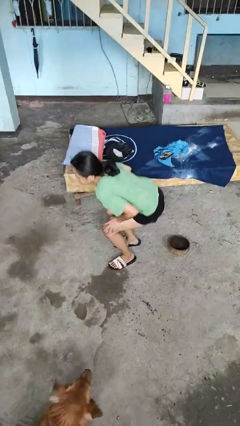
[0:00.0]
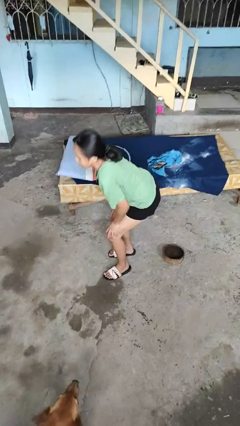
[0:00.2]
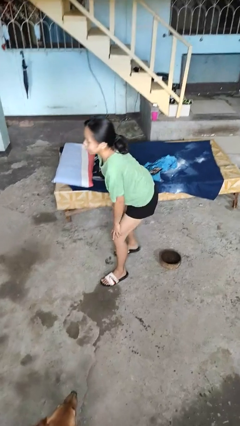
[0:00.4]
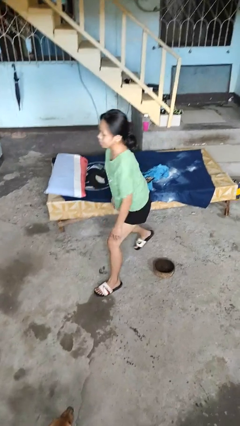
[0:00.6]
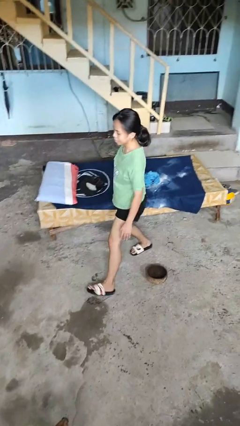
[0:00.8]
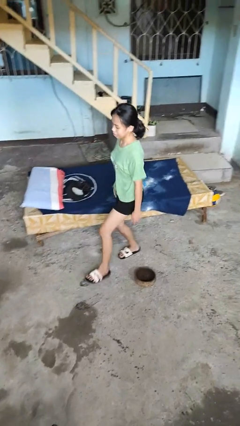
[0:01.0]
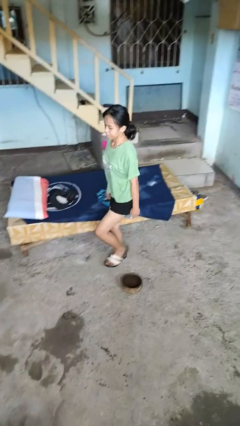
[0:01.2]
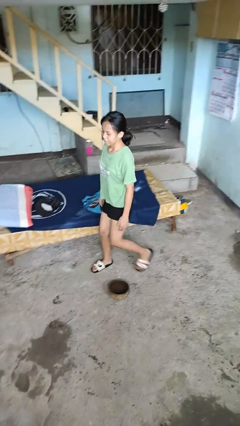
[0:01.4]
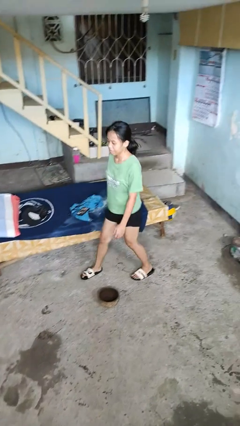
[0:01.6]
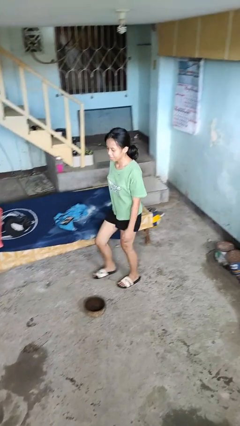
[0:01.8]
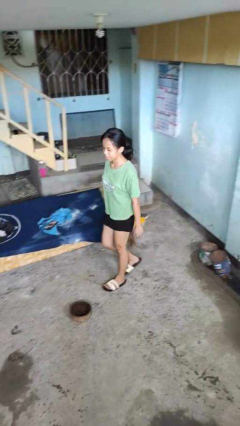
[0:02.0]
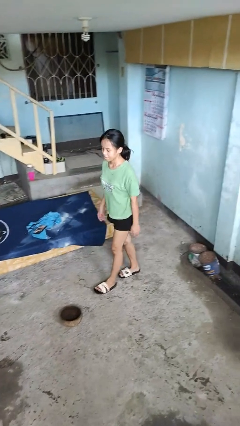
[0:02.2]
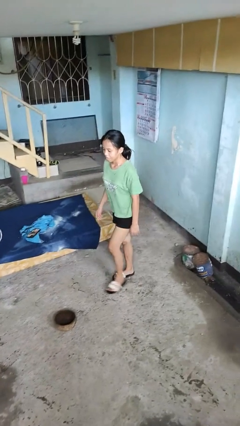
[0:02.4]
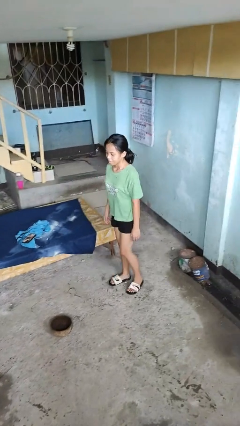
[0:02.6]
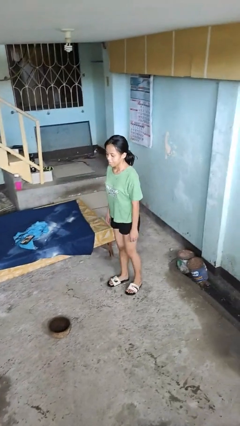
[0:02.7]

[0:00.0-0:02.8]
person stands up from floor

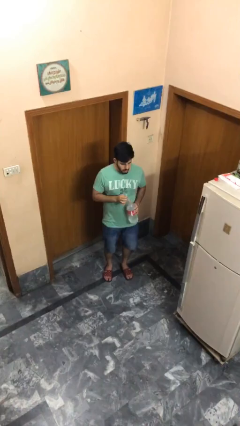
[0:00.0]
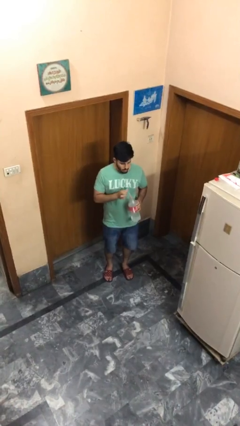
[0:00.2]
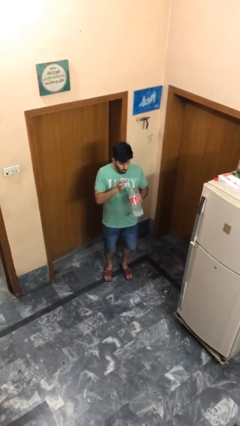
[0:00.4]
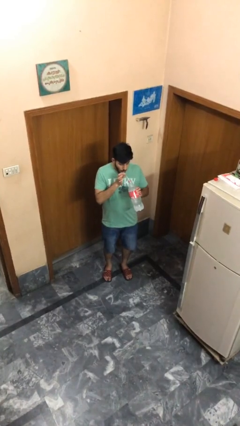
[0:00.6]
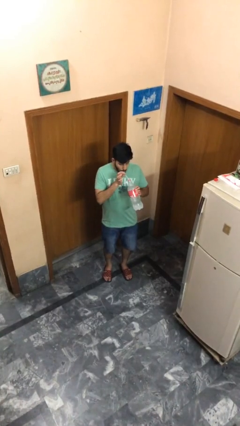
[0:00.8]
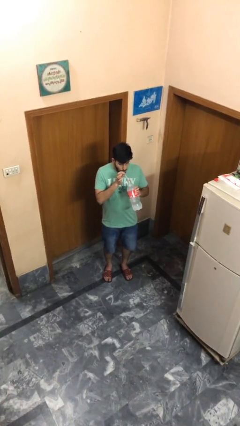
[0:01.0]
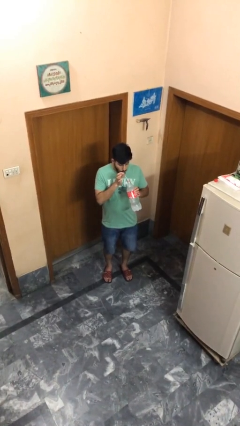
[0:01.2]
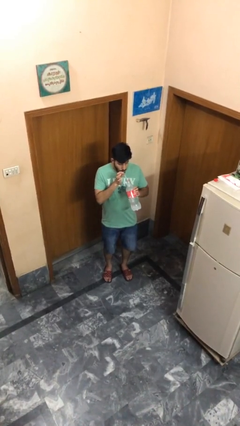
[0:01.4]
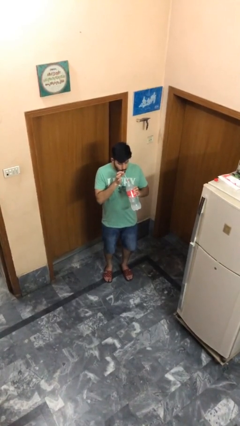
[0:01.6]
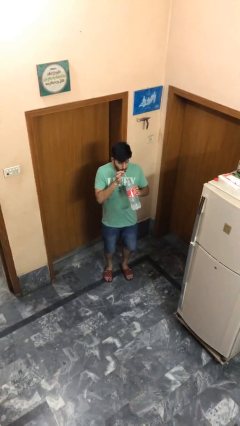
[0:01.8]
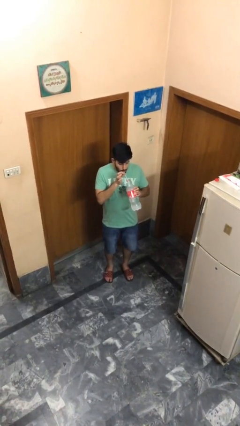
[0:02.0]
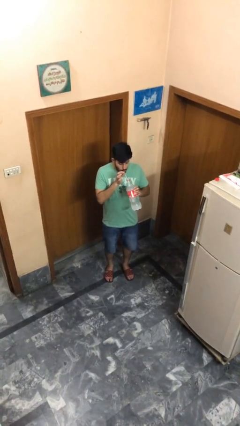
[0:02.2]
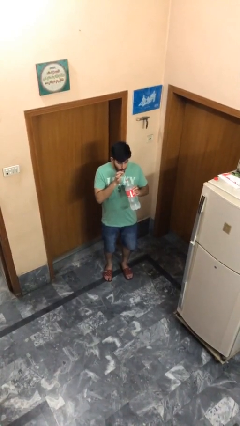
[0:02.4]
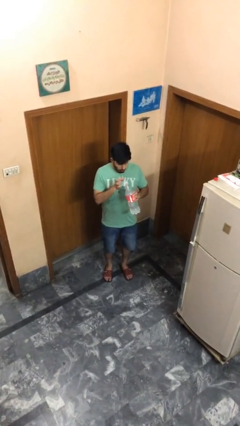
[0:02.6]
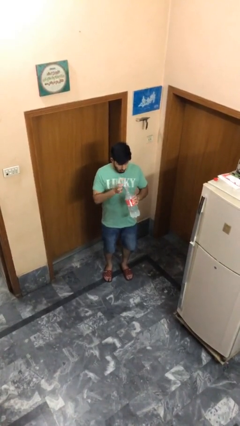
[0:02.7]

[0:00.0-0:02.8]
person drinks from straw

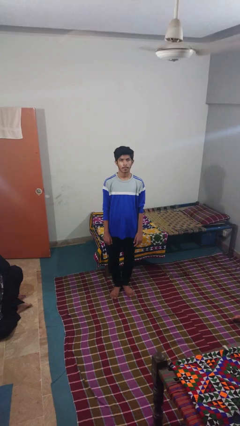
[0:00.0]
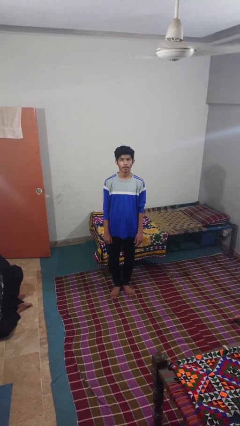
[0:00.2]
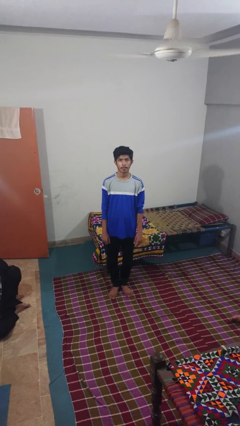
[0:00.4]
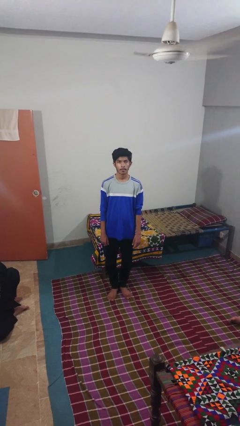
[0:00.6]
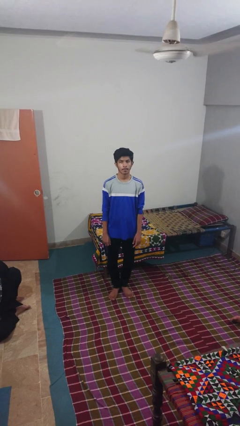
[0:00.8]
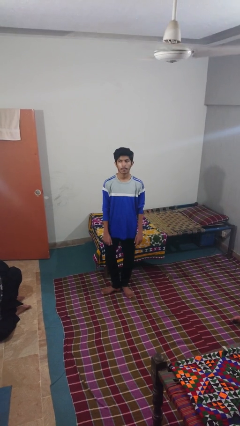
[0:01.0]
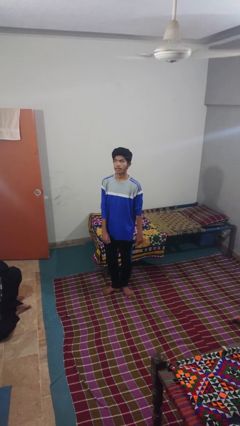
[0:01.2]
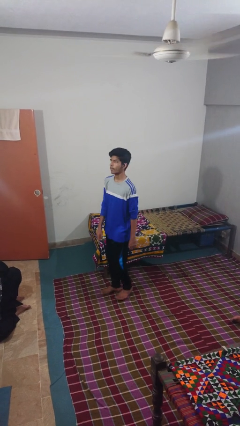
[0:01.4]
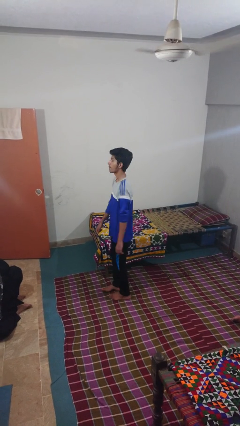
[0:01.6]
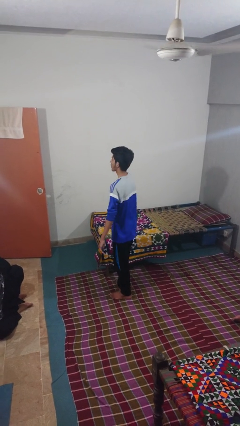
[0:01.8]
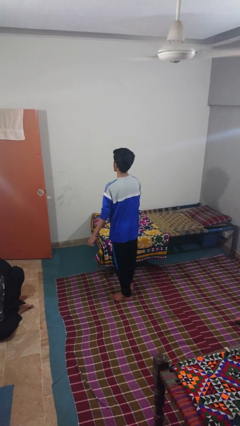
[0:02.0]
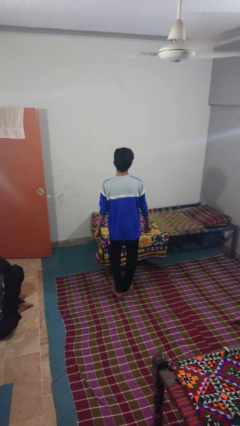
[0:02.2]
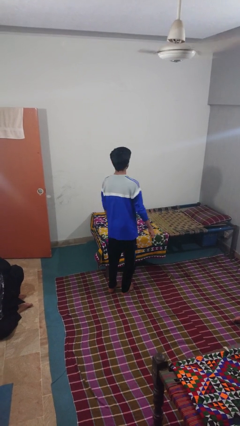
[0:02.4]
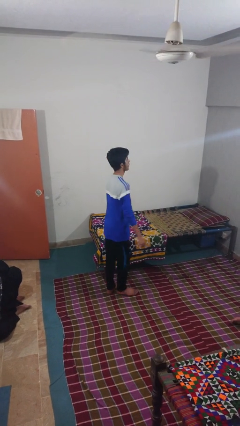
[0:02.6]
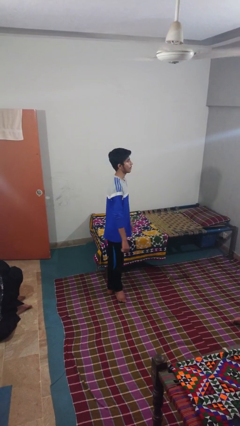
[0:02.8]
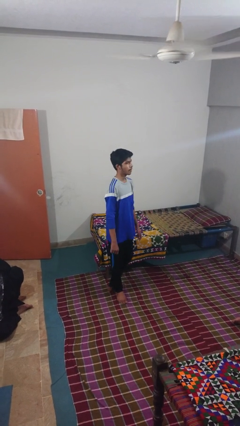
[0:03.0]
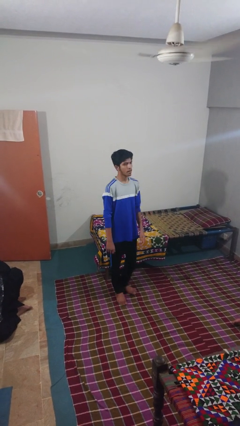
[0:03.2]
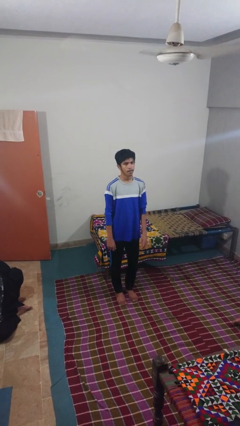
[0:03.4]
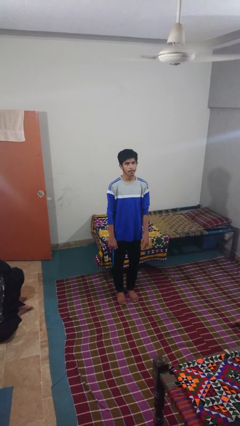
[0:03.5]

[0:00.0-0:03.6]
person twirls

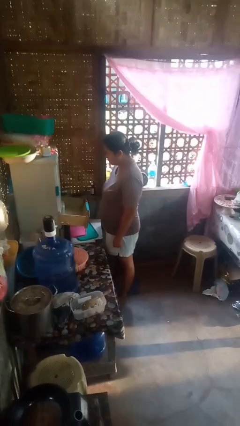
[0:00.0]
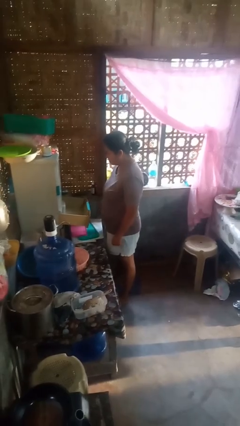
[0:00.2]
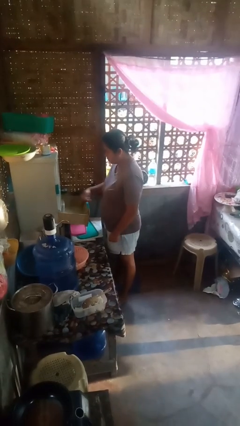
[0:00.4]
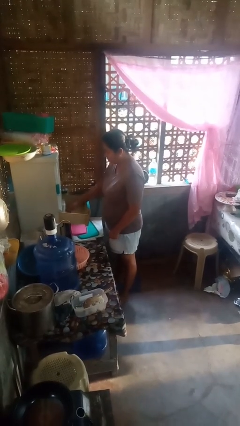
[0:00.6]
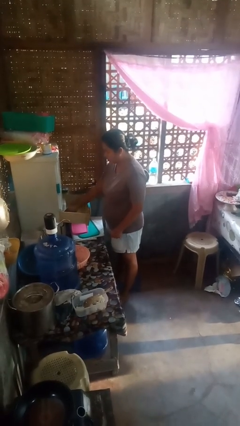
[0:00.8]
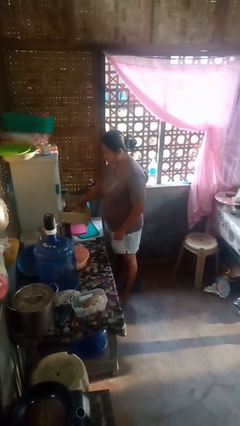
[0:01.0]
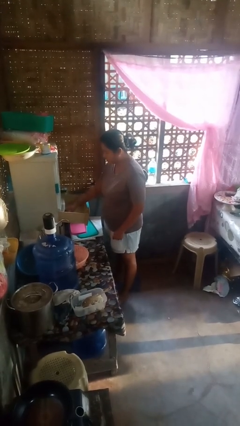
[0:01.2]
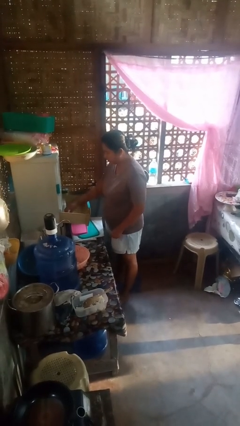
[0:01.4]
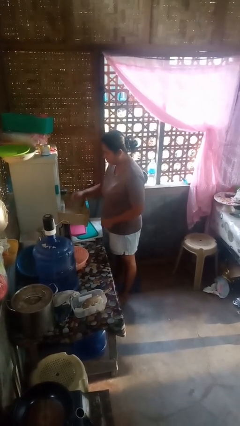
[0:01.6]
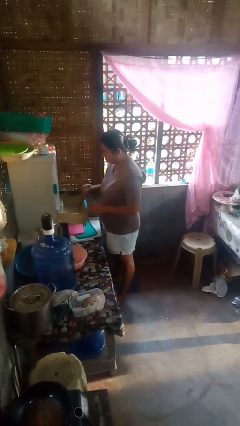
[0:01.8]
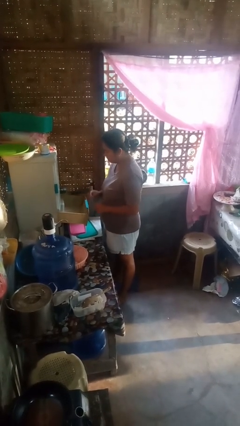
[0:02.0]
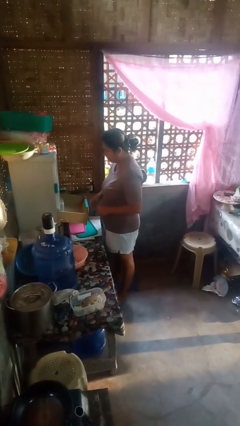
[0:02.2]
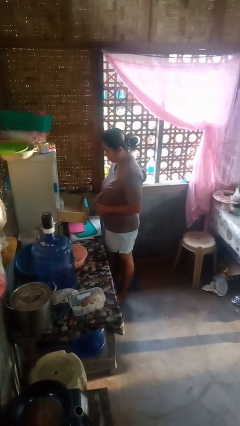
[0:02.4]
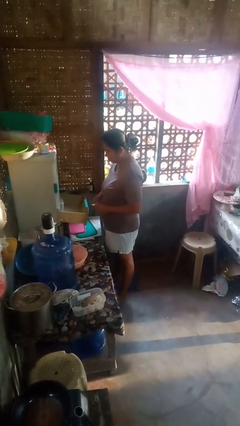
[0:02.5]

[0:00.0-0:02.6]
person takes object from kitchen drawer

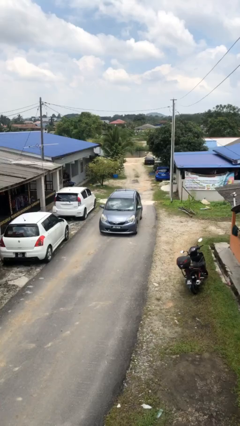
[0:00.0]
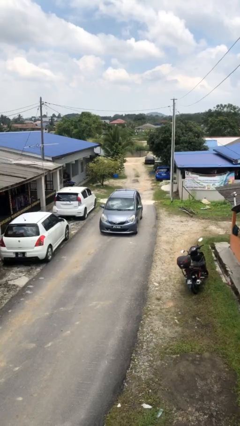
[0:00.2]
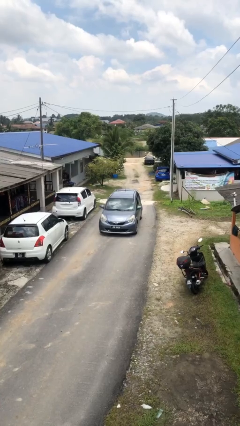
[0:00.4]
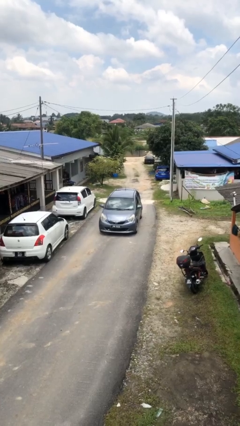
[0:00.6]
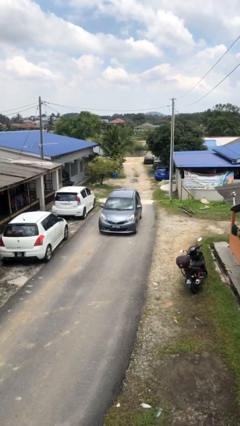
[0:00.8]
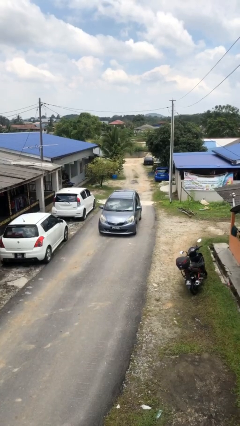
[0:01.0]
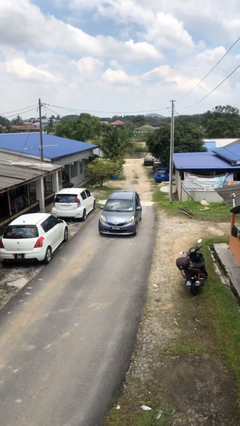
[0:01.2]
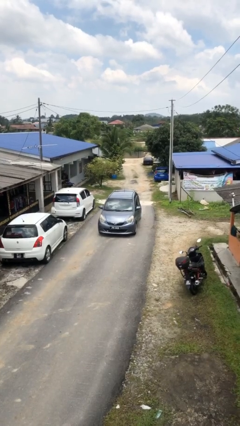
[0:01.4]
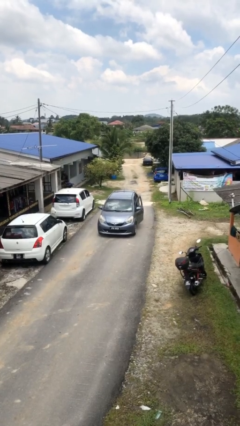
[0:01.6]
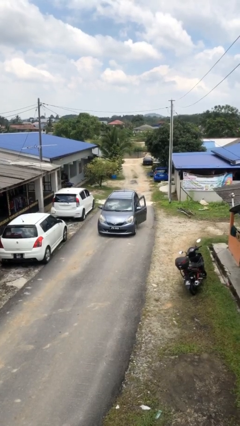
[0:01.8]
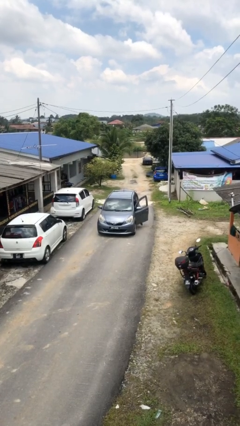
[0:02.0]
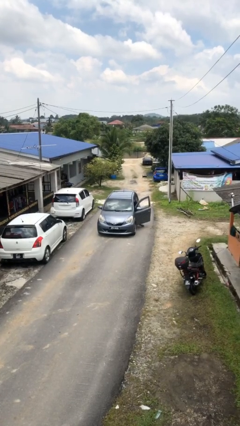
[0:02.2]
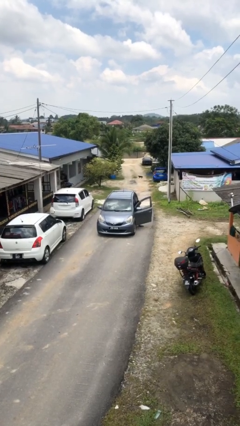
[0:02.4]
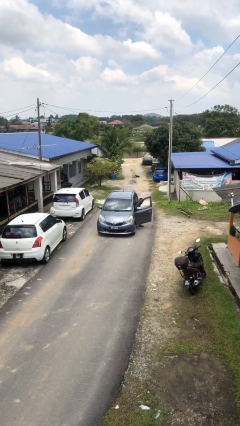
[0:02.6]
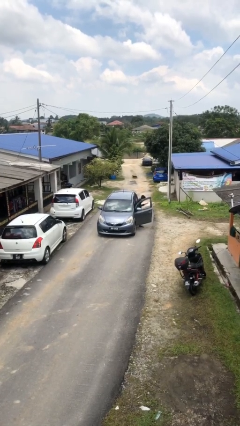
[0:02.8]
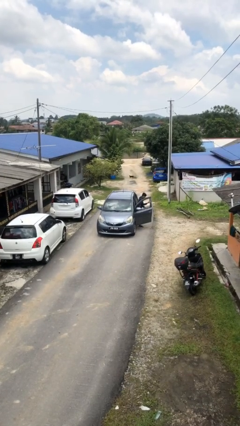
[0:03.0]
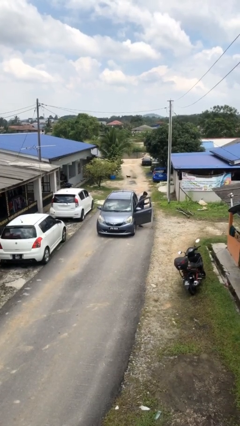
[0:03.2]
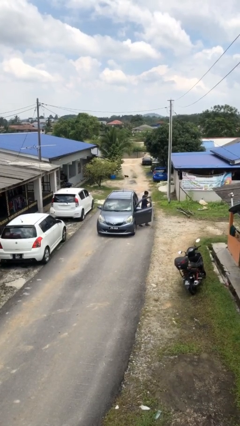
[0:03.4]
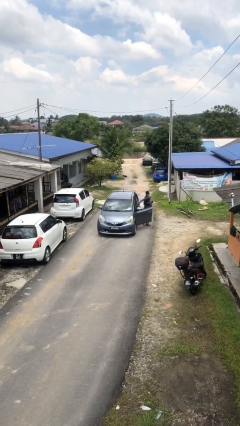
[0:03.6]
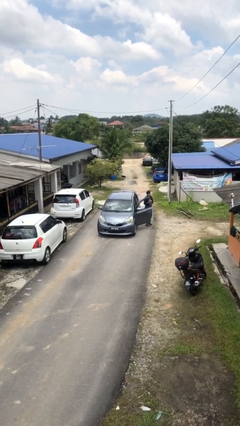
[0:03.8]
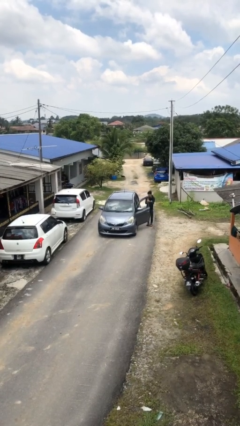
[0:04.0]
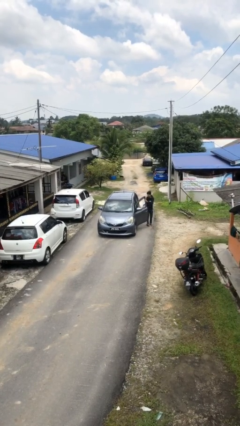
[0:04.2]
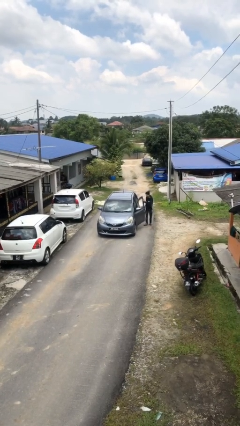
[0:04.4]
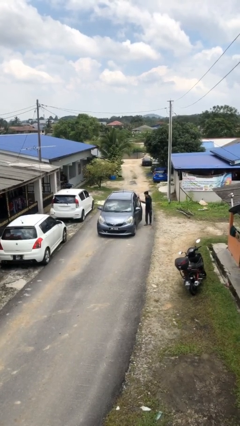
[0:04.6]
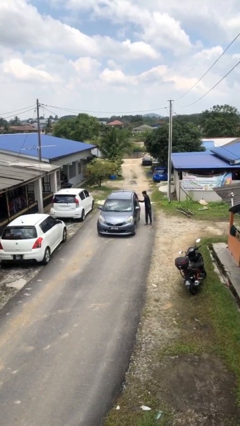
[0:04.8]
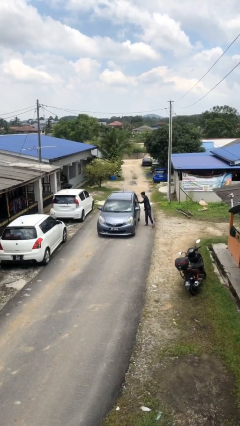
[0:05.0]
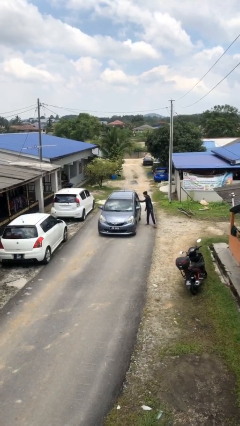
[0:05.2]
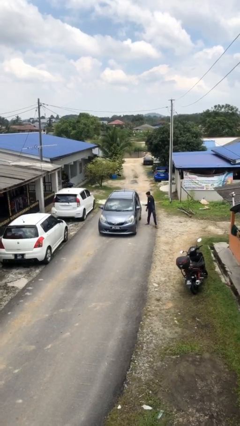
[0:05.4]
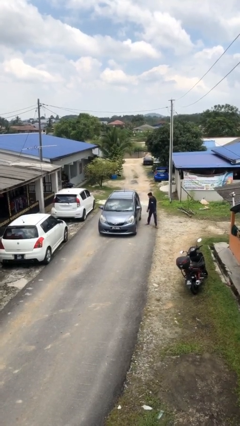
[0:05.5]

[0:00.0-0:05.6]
car drops off person

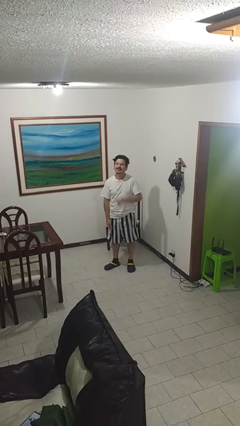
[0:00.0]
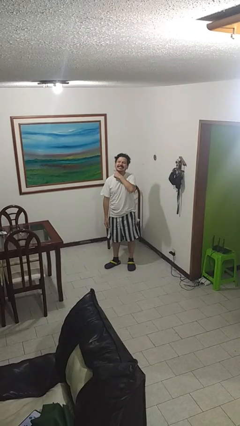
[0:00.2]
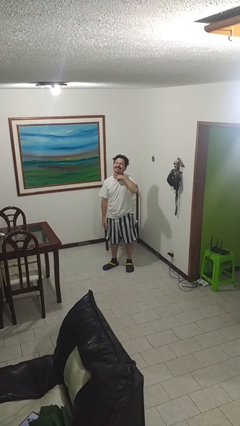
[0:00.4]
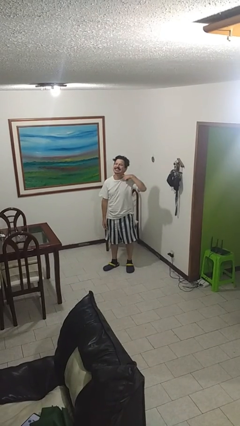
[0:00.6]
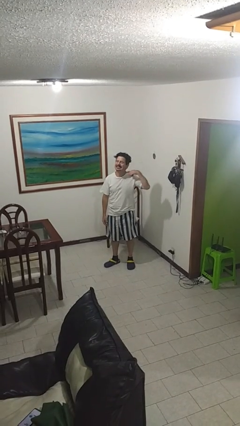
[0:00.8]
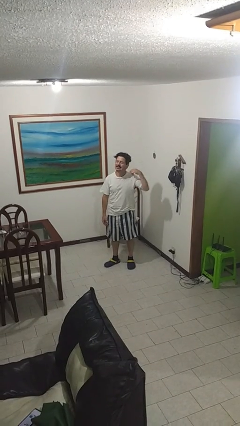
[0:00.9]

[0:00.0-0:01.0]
person gestures cut
